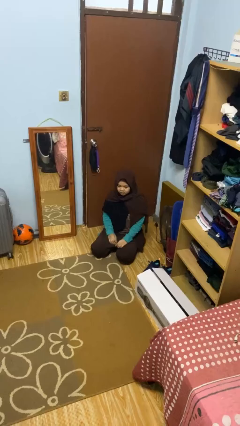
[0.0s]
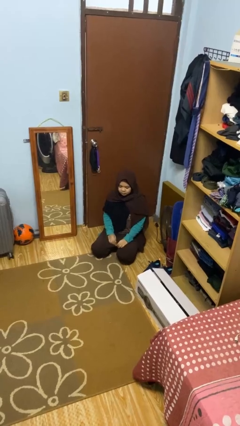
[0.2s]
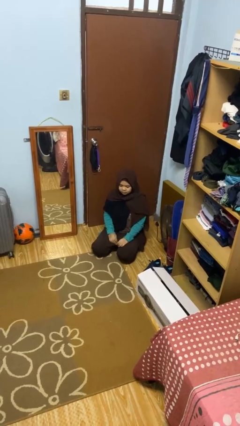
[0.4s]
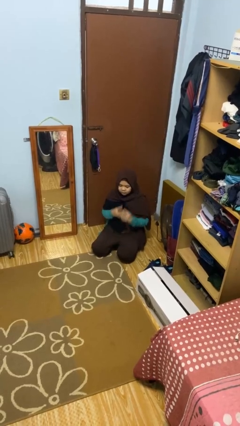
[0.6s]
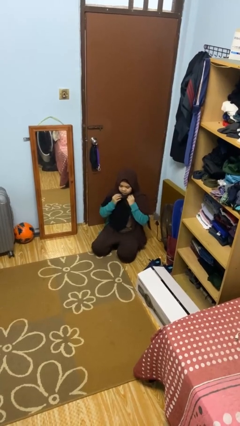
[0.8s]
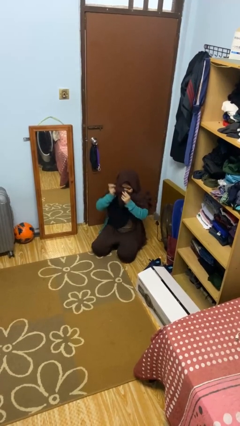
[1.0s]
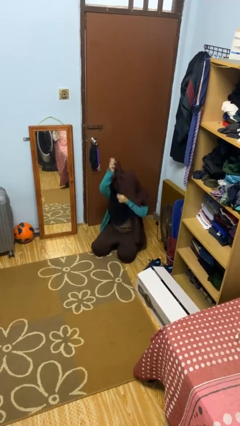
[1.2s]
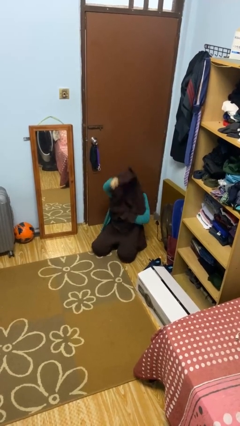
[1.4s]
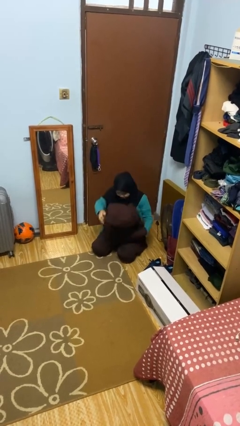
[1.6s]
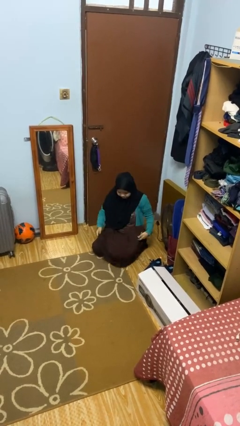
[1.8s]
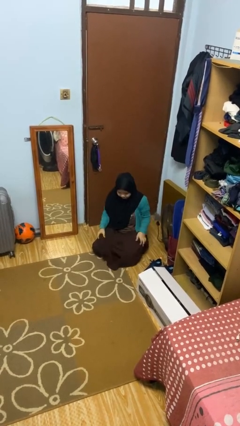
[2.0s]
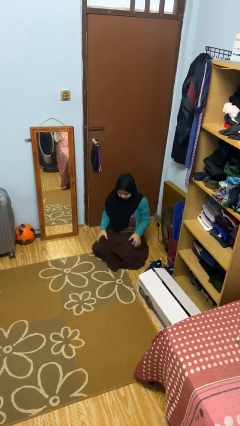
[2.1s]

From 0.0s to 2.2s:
person takes off scarf

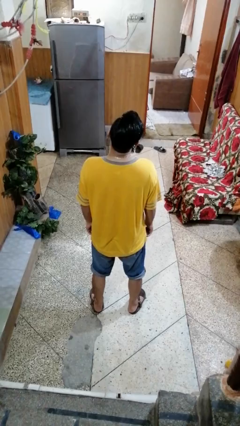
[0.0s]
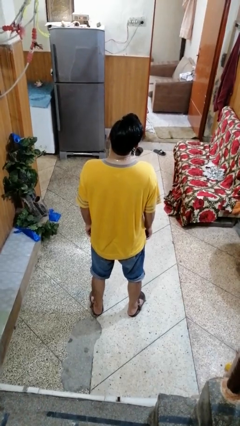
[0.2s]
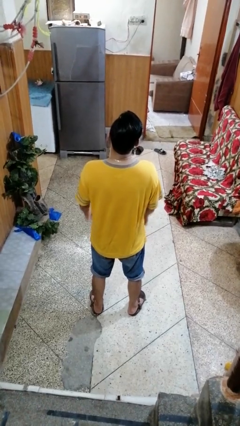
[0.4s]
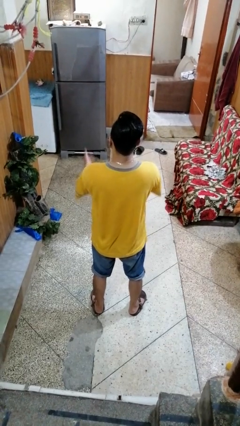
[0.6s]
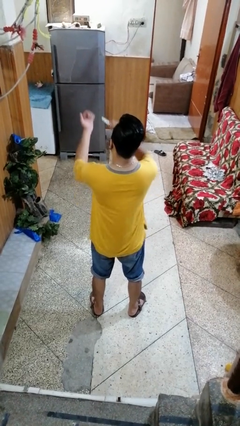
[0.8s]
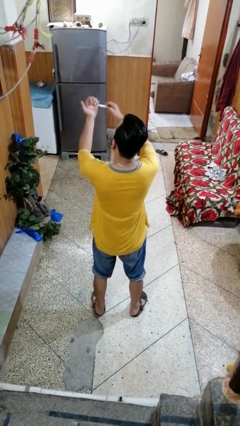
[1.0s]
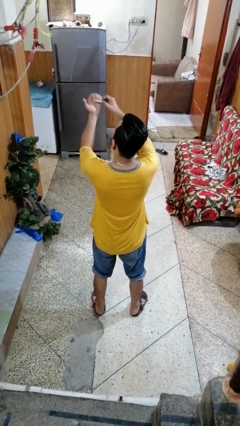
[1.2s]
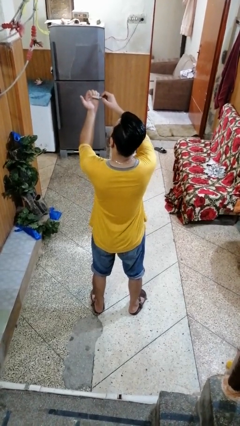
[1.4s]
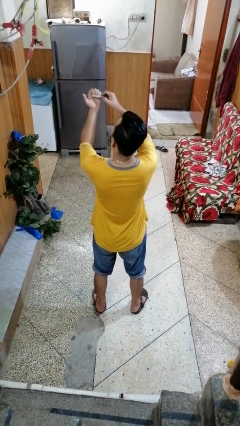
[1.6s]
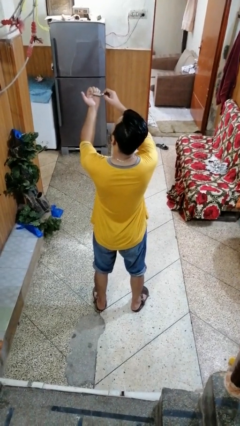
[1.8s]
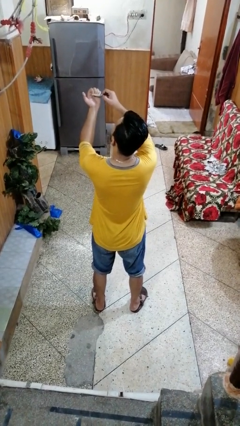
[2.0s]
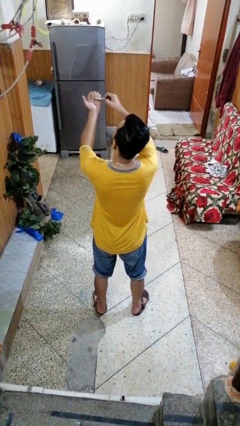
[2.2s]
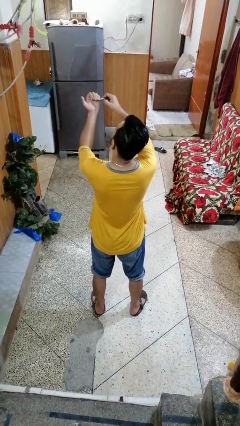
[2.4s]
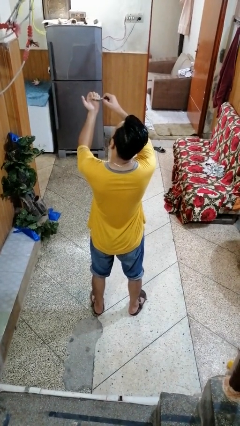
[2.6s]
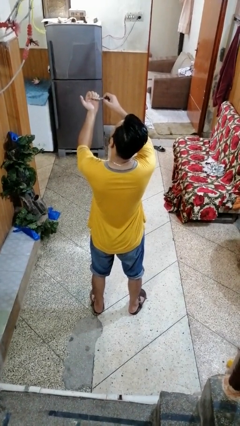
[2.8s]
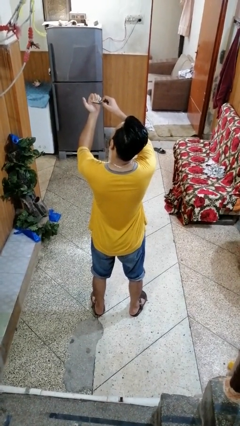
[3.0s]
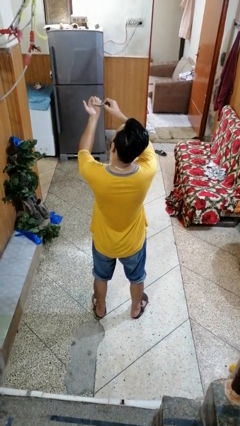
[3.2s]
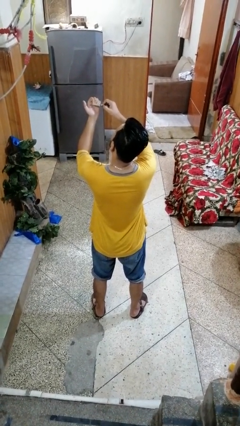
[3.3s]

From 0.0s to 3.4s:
person files fingernails

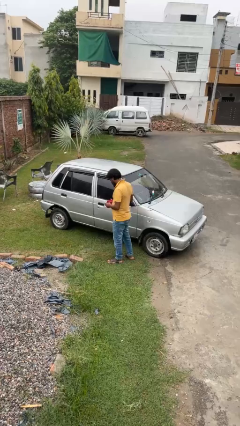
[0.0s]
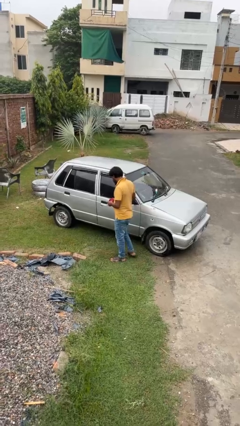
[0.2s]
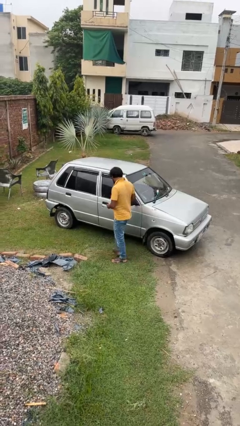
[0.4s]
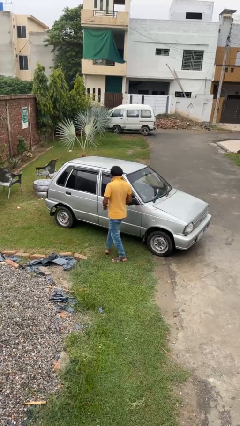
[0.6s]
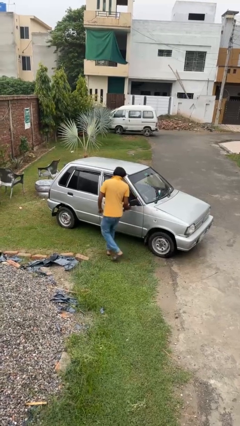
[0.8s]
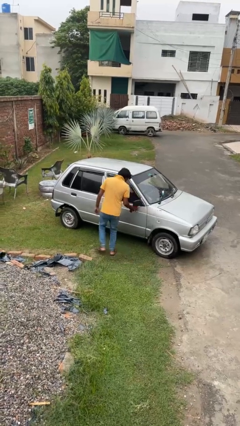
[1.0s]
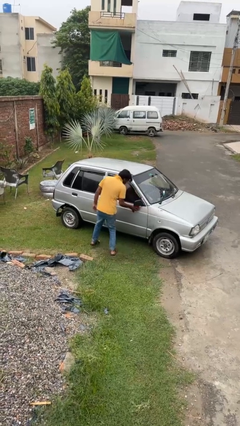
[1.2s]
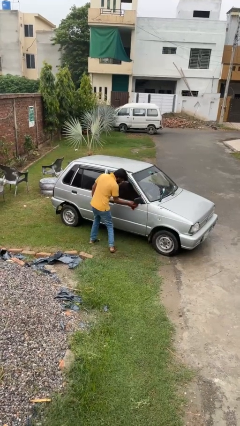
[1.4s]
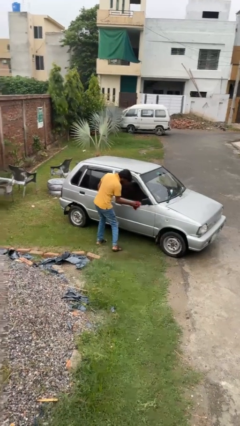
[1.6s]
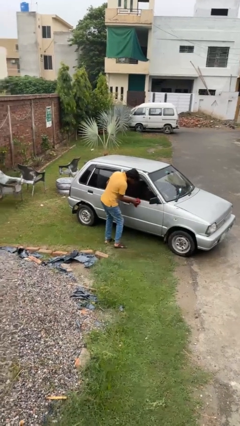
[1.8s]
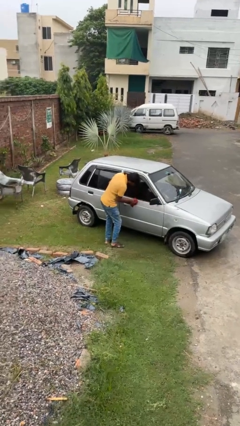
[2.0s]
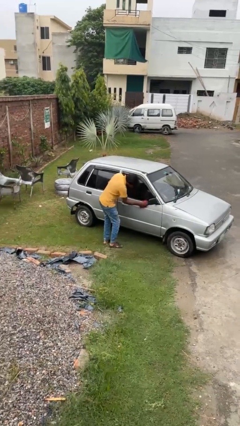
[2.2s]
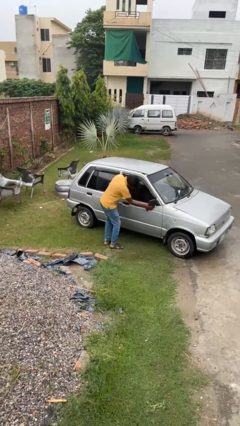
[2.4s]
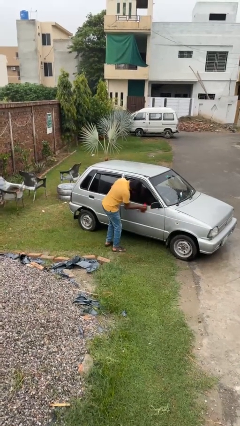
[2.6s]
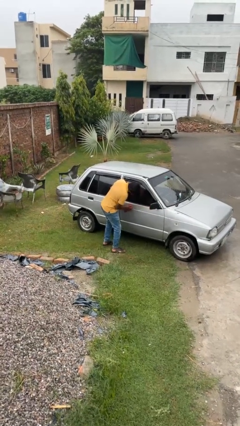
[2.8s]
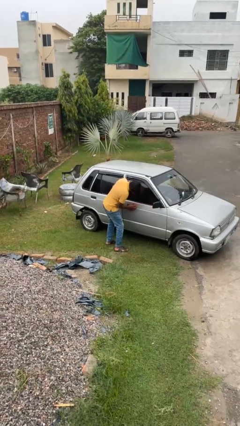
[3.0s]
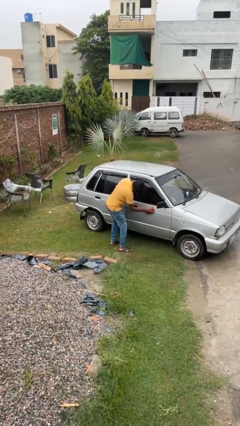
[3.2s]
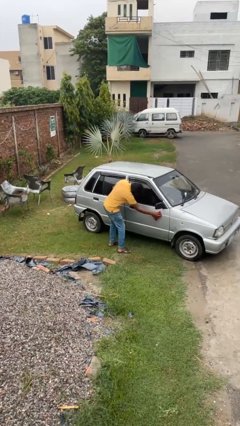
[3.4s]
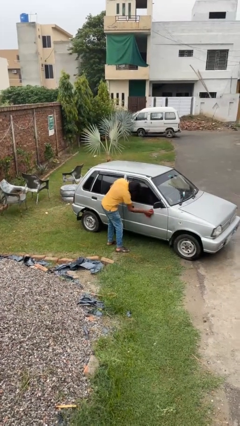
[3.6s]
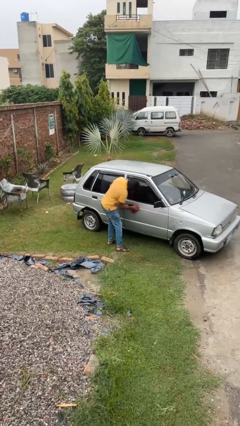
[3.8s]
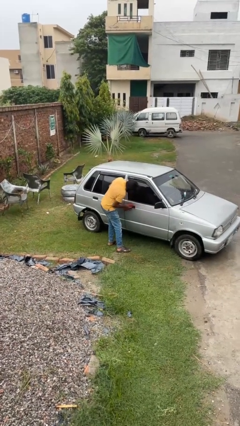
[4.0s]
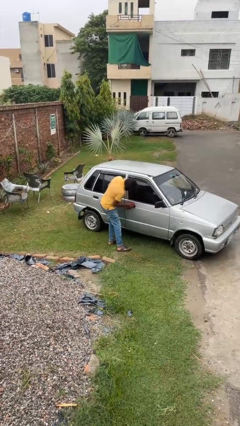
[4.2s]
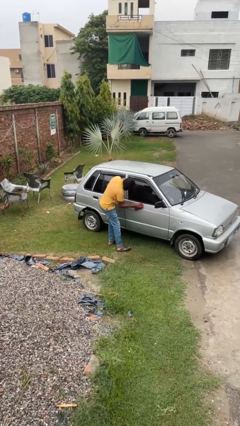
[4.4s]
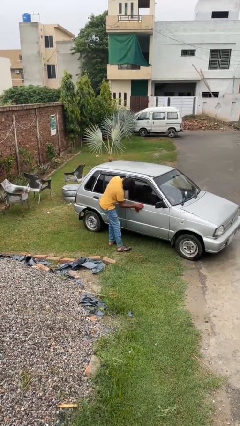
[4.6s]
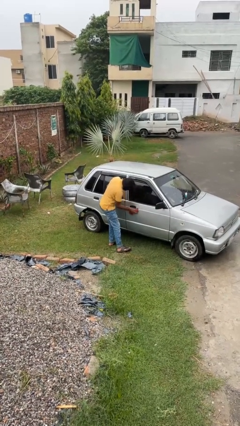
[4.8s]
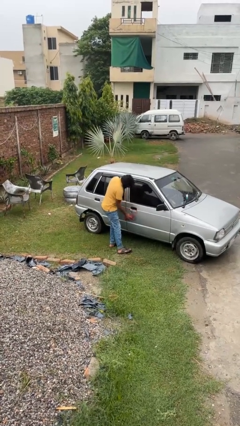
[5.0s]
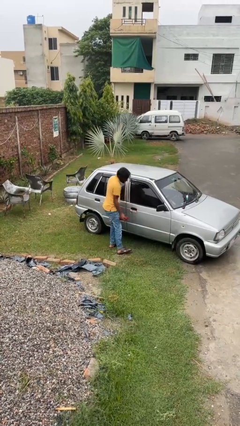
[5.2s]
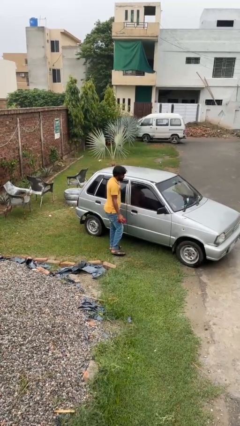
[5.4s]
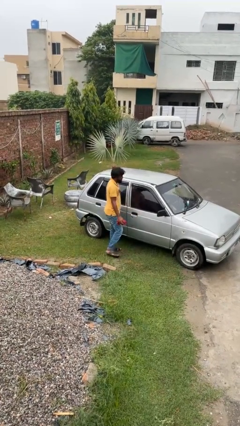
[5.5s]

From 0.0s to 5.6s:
person polishes car with rag

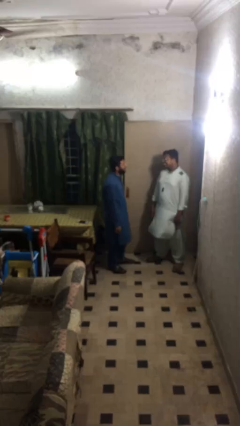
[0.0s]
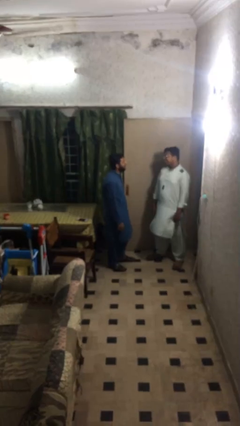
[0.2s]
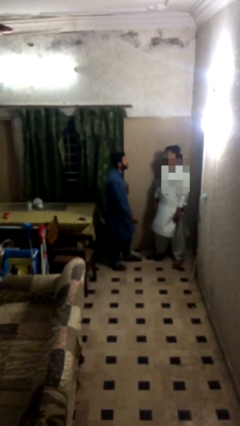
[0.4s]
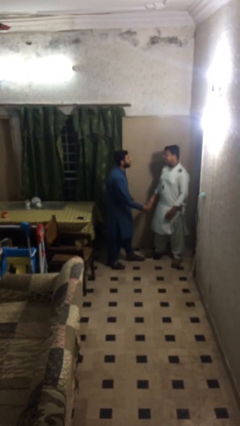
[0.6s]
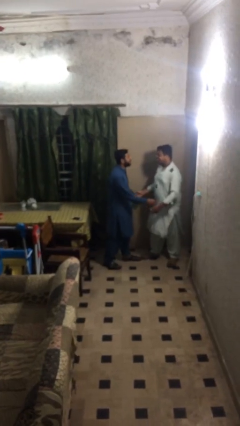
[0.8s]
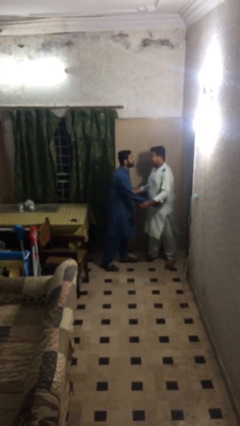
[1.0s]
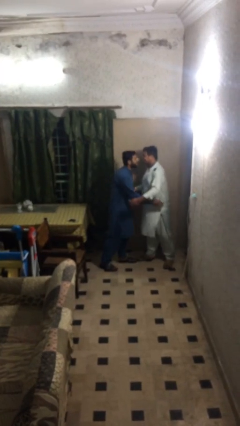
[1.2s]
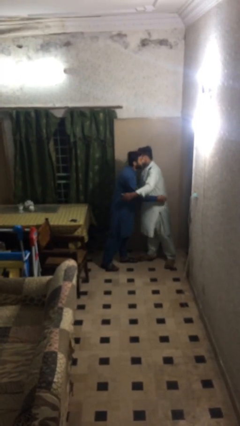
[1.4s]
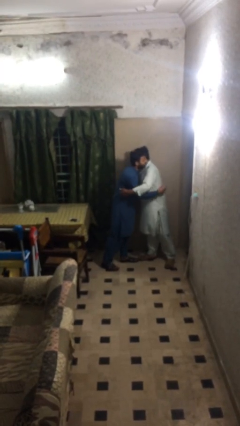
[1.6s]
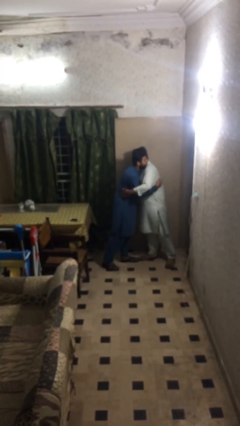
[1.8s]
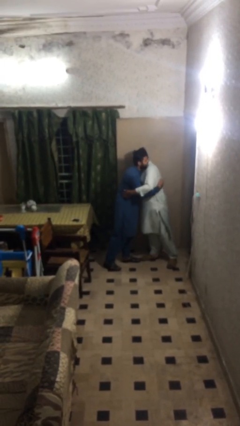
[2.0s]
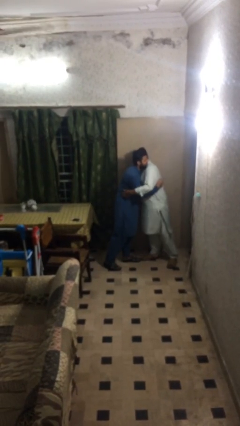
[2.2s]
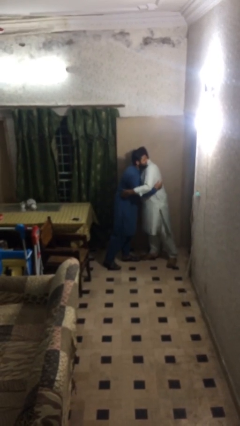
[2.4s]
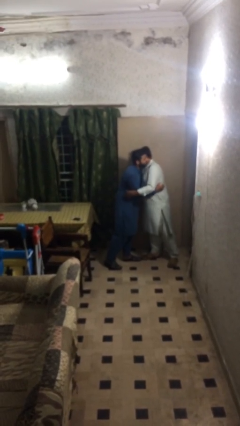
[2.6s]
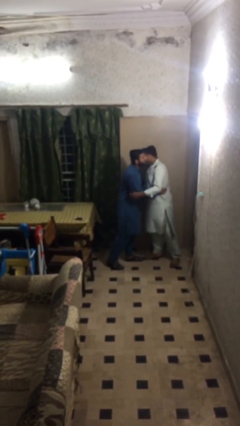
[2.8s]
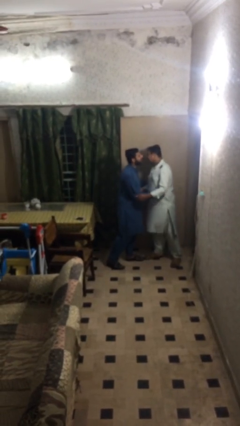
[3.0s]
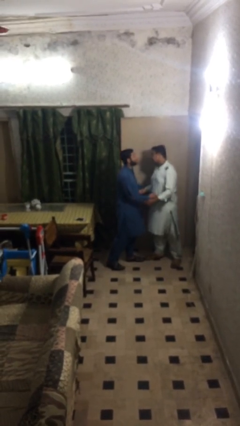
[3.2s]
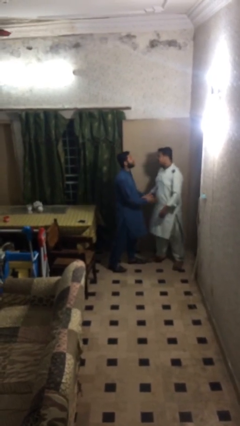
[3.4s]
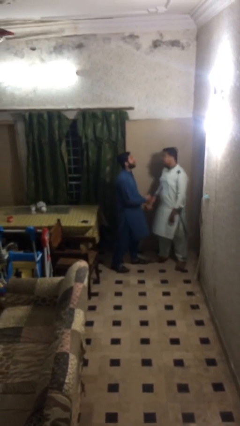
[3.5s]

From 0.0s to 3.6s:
person embraces person

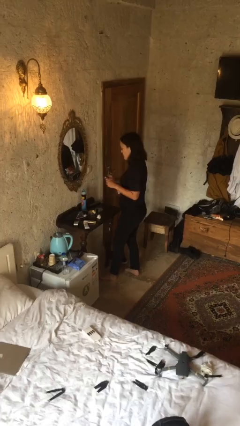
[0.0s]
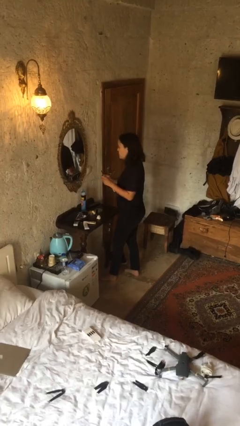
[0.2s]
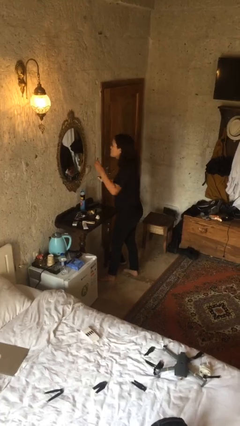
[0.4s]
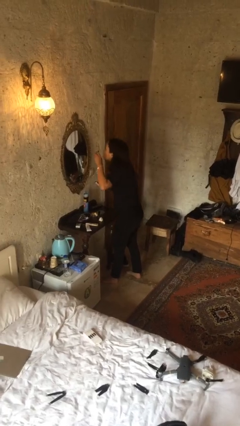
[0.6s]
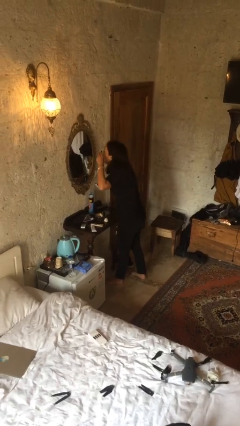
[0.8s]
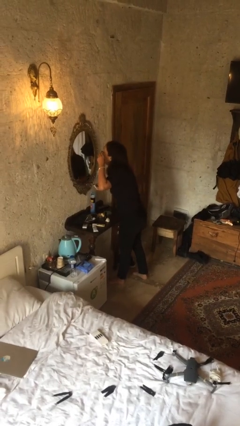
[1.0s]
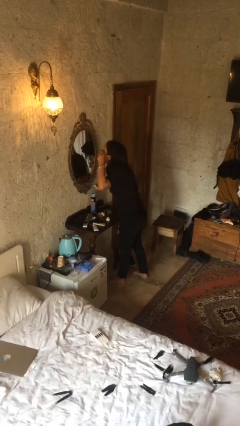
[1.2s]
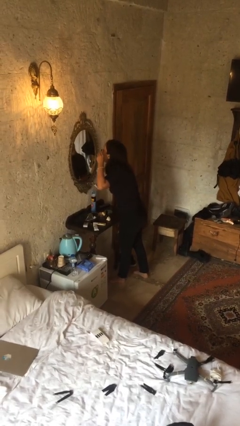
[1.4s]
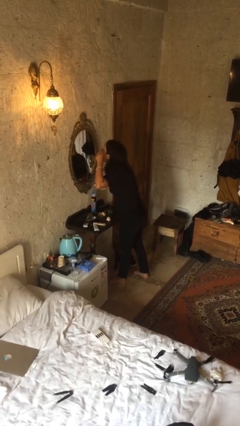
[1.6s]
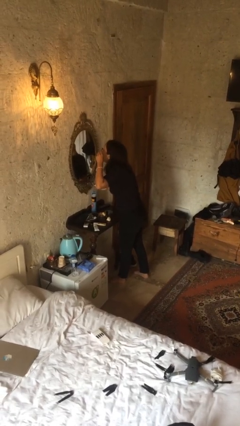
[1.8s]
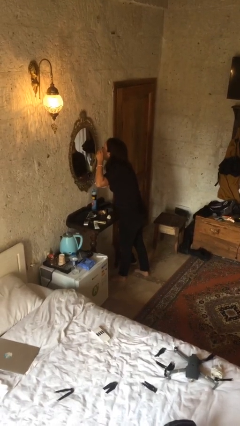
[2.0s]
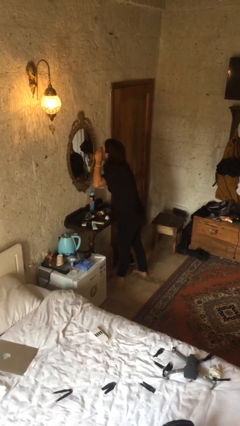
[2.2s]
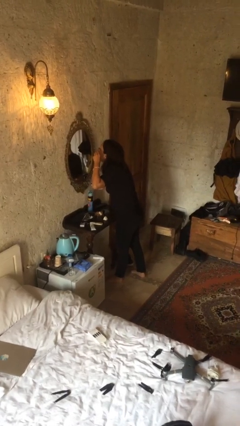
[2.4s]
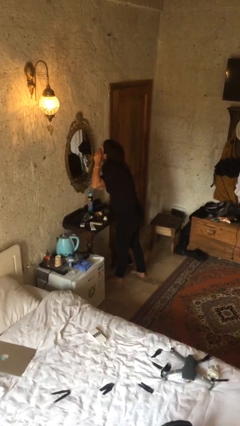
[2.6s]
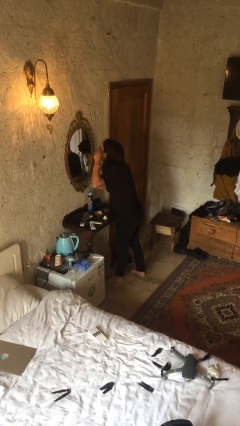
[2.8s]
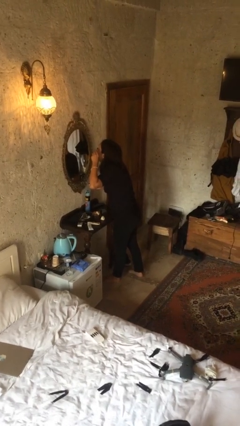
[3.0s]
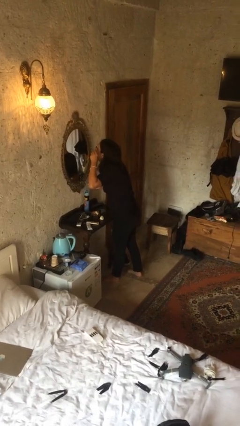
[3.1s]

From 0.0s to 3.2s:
person applies eye makeup
